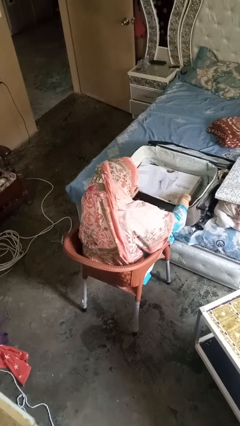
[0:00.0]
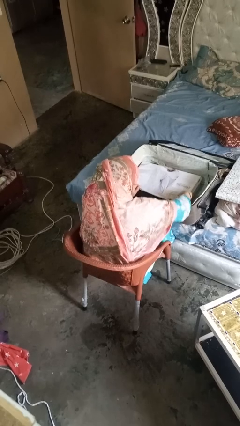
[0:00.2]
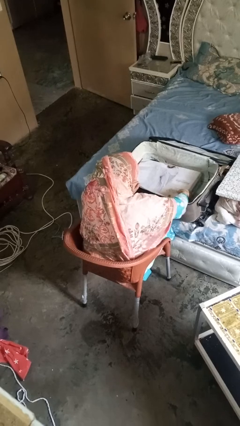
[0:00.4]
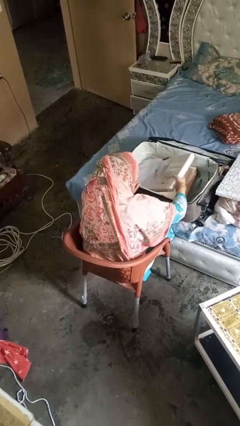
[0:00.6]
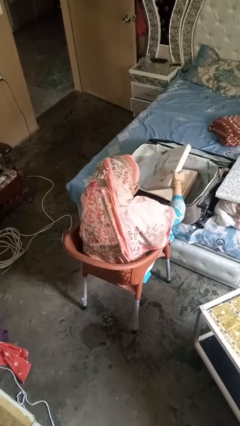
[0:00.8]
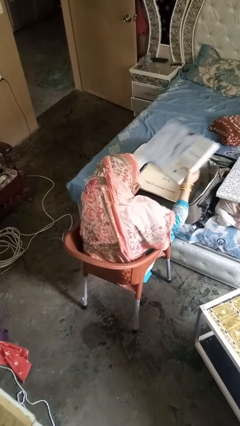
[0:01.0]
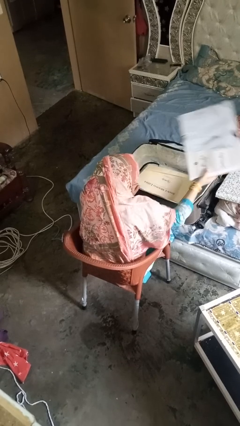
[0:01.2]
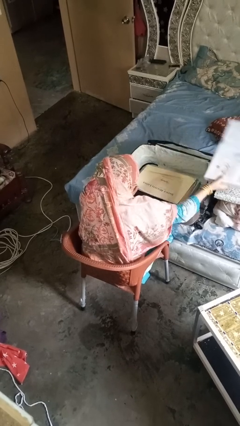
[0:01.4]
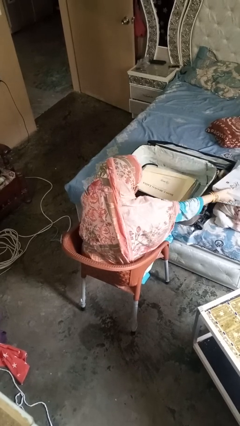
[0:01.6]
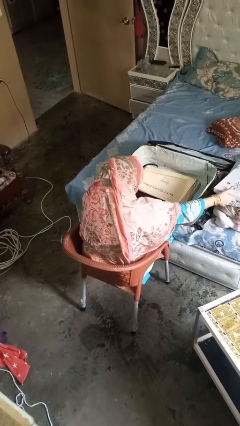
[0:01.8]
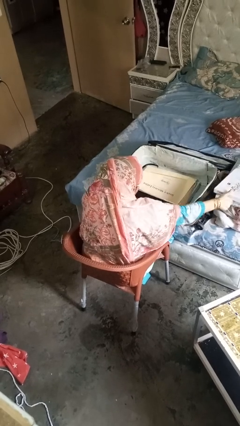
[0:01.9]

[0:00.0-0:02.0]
person unloads clothes from suitcase

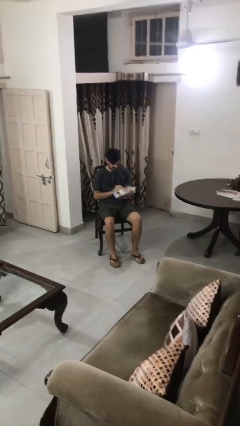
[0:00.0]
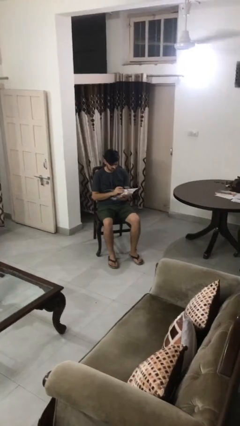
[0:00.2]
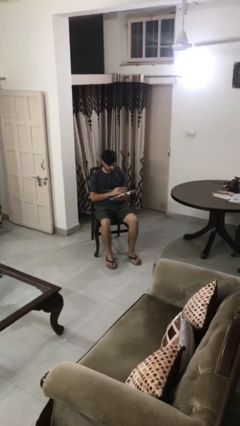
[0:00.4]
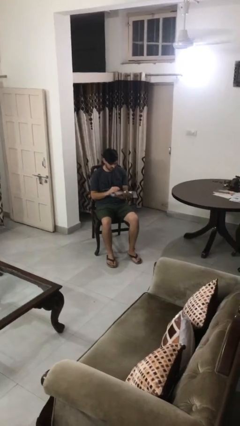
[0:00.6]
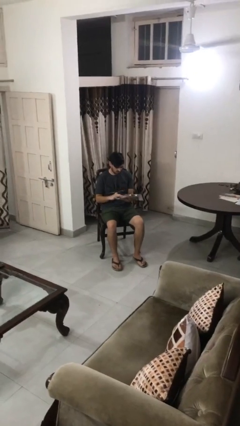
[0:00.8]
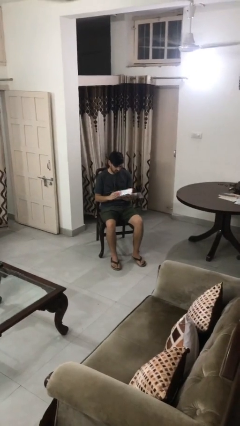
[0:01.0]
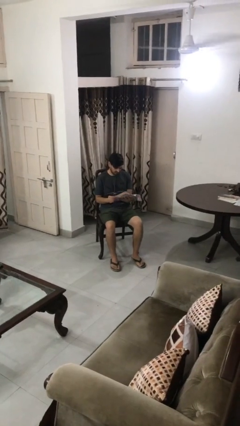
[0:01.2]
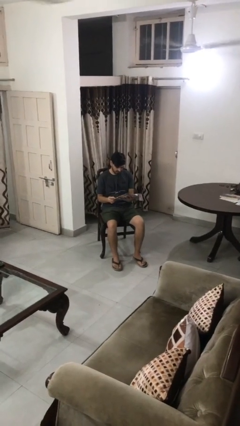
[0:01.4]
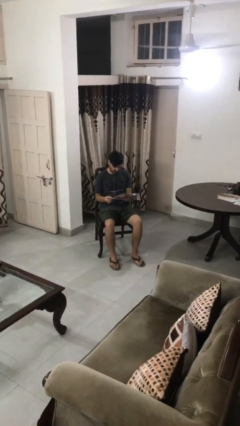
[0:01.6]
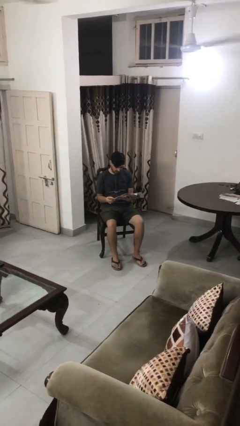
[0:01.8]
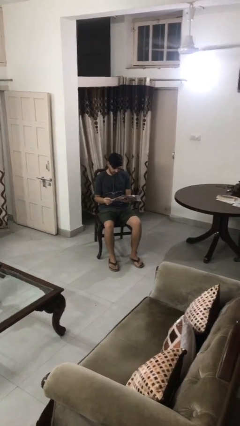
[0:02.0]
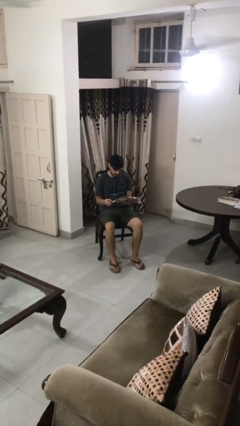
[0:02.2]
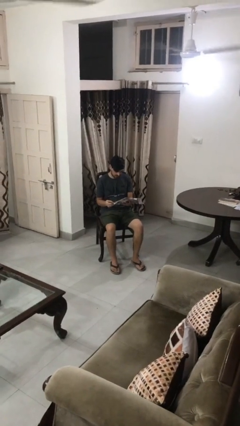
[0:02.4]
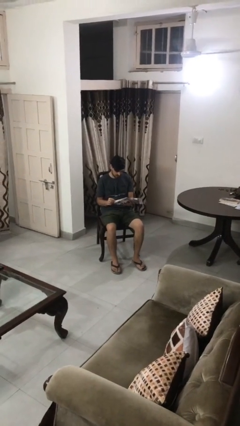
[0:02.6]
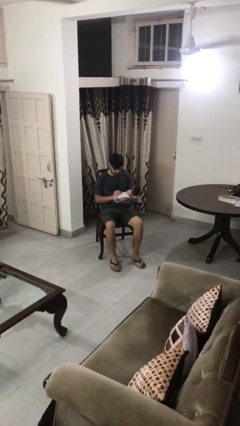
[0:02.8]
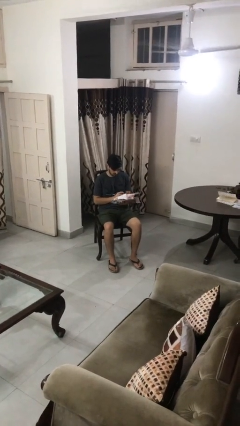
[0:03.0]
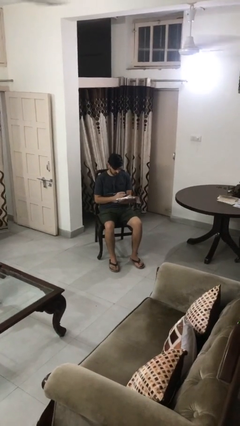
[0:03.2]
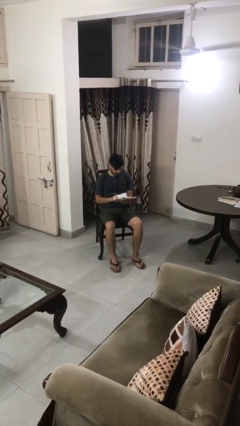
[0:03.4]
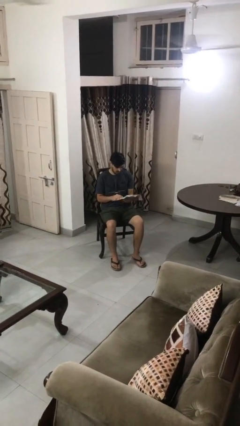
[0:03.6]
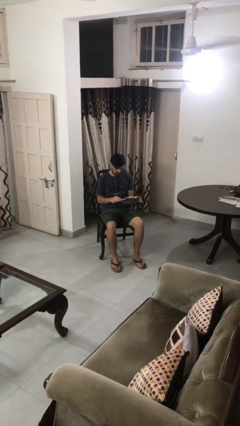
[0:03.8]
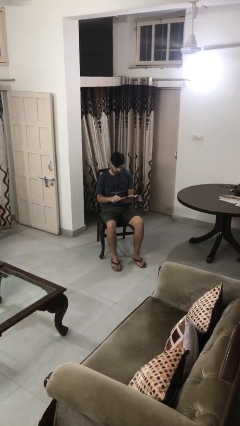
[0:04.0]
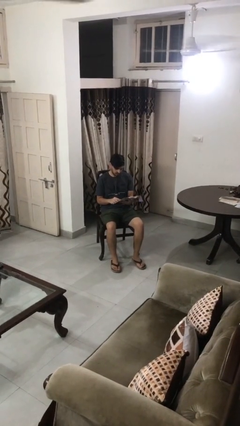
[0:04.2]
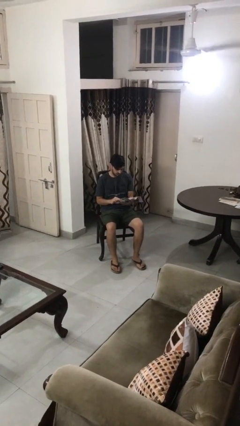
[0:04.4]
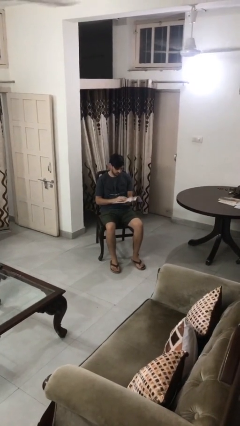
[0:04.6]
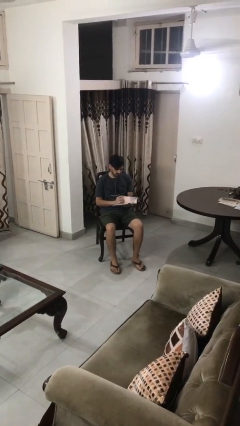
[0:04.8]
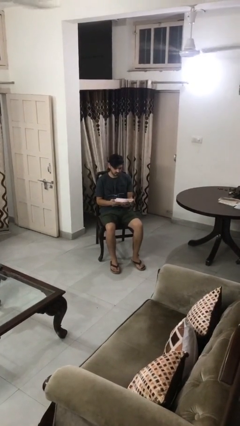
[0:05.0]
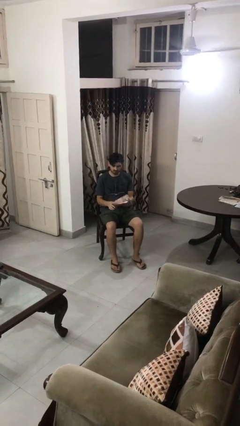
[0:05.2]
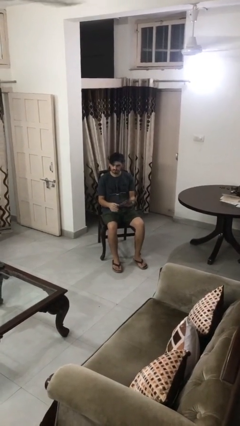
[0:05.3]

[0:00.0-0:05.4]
person reads magazine

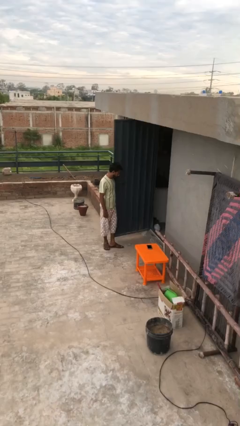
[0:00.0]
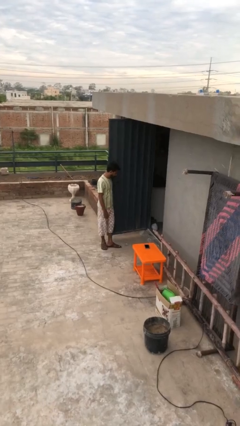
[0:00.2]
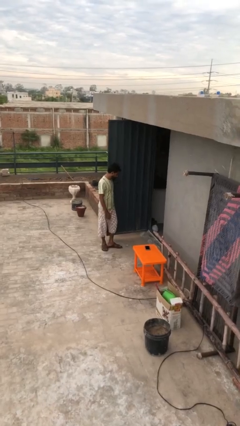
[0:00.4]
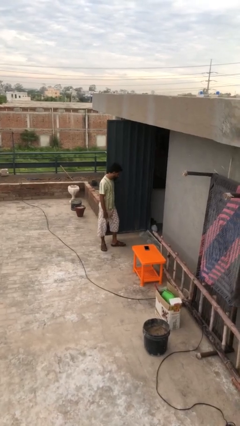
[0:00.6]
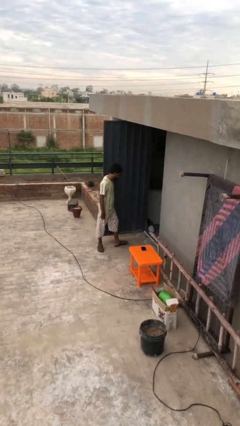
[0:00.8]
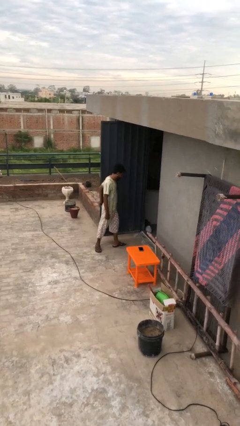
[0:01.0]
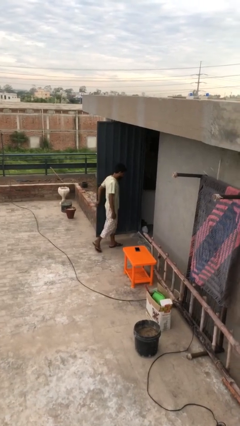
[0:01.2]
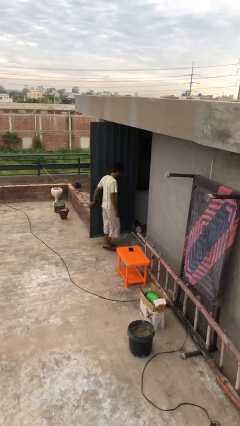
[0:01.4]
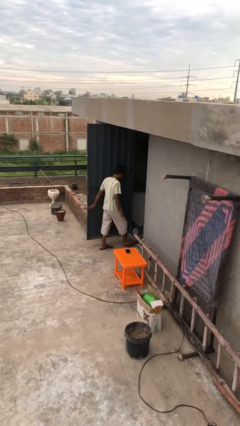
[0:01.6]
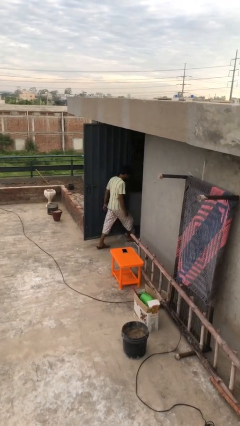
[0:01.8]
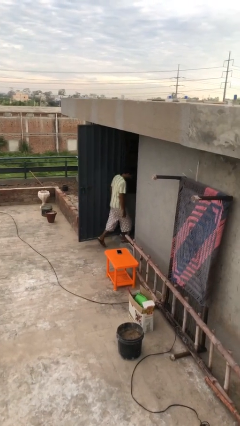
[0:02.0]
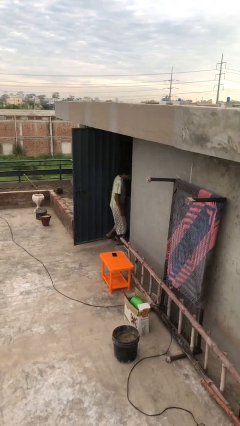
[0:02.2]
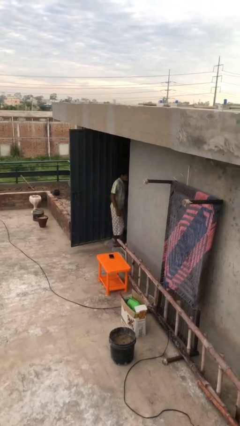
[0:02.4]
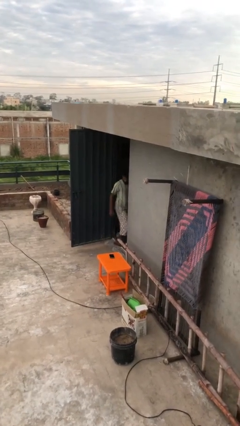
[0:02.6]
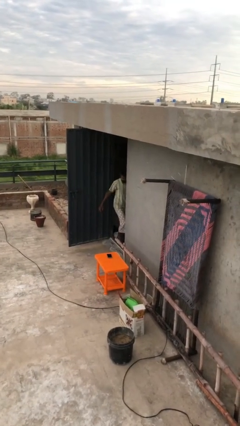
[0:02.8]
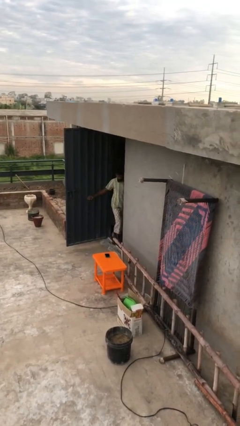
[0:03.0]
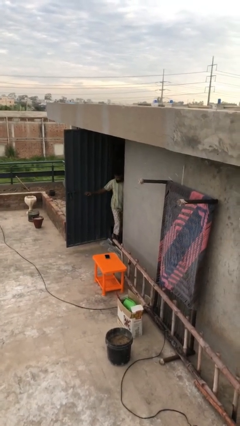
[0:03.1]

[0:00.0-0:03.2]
person exits scene through structure

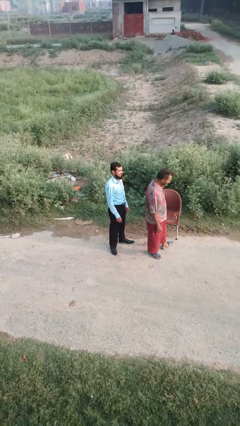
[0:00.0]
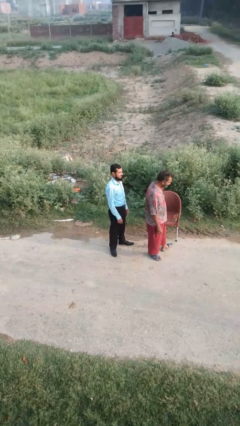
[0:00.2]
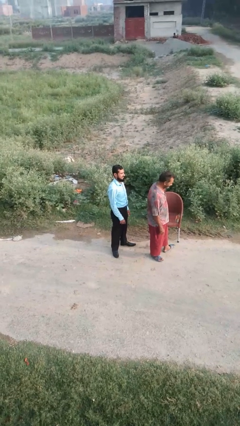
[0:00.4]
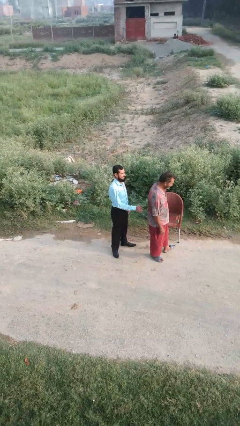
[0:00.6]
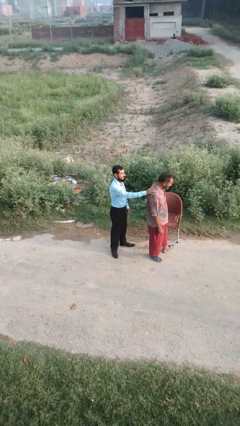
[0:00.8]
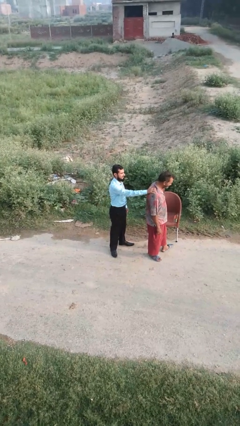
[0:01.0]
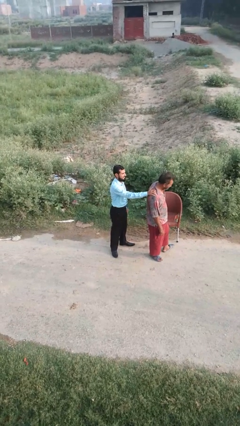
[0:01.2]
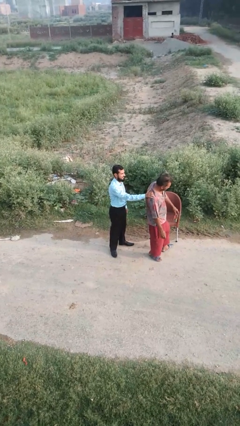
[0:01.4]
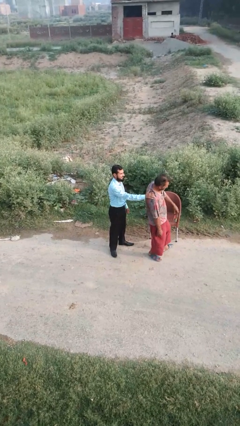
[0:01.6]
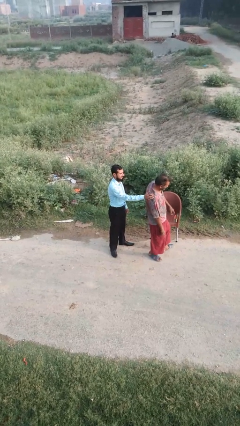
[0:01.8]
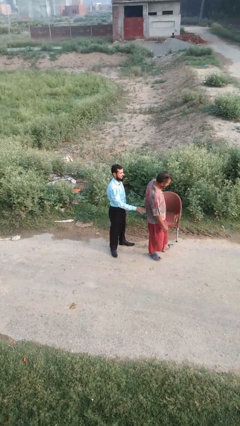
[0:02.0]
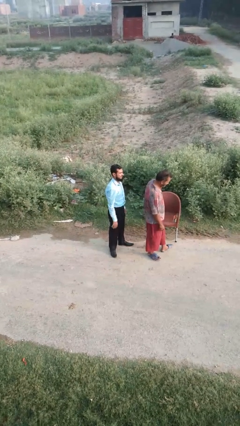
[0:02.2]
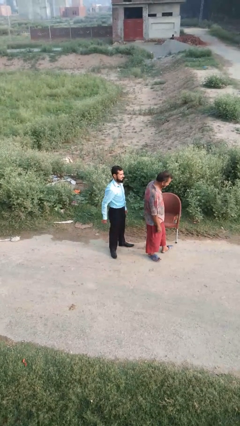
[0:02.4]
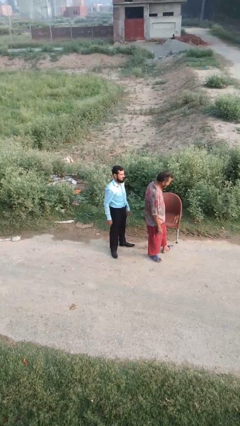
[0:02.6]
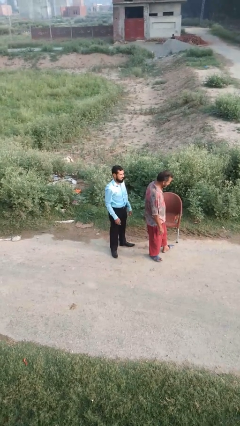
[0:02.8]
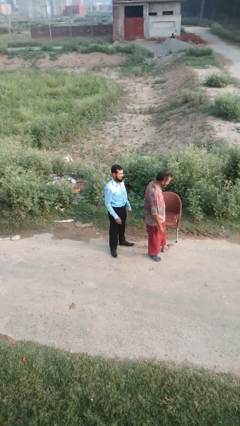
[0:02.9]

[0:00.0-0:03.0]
person touches back of person

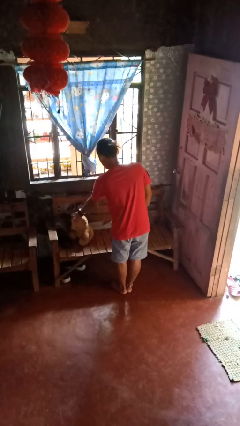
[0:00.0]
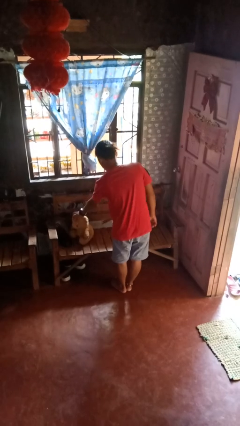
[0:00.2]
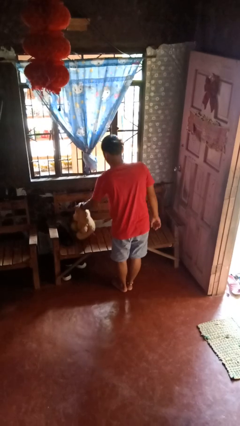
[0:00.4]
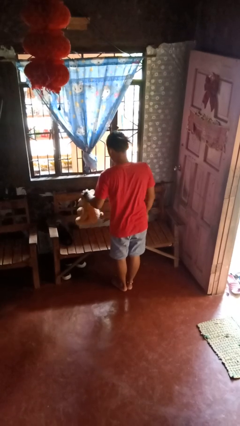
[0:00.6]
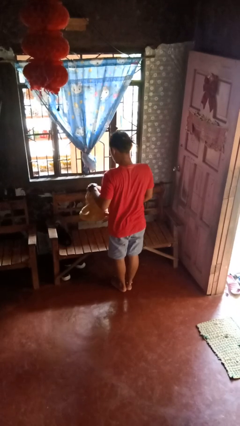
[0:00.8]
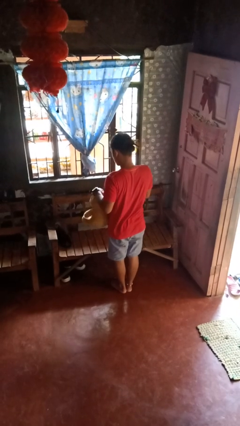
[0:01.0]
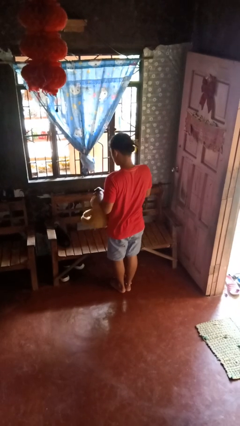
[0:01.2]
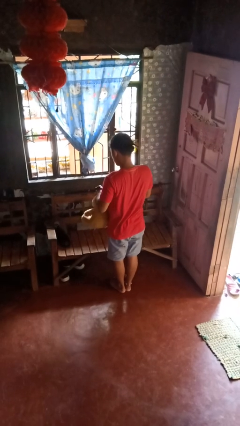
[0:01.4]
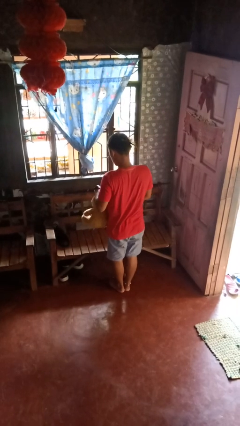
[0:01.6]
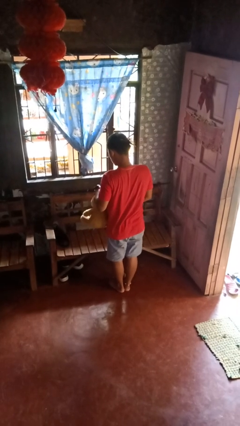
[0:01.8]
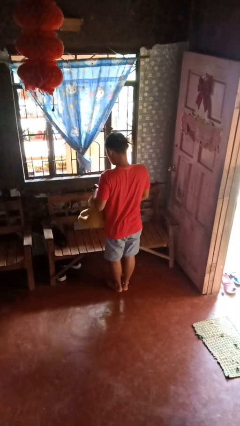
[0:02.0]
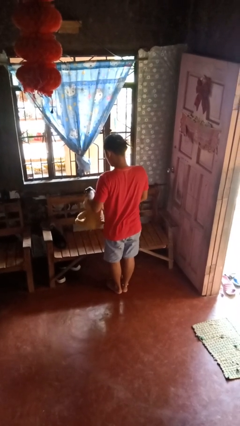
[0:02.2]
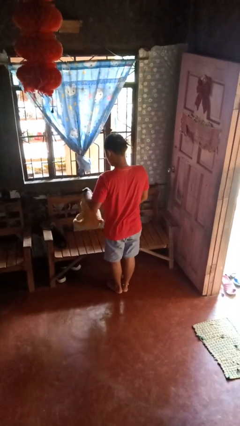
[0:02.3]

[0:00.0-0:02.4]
person picks up object from couch

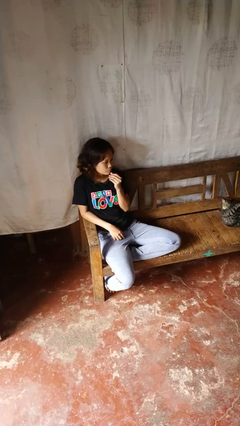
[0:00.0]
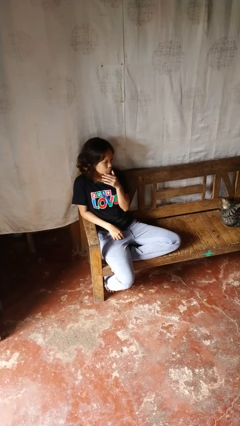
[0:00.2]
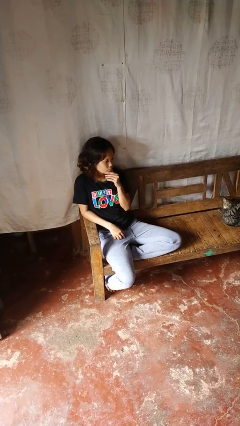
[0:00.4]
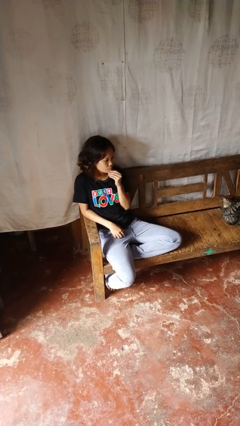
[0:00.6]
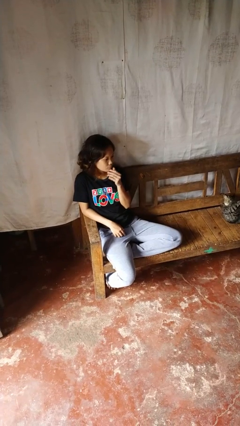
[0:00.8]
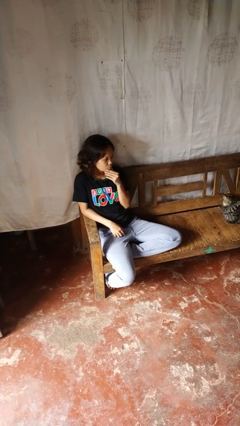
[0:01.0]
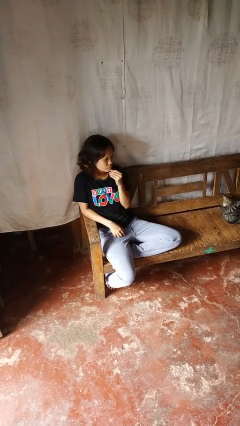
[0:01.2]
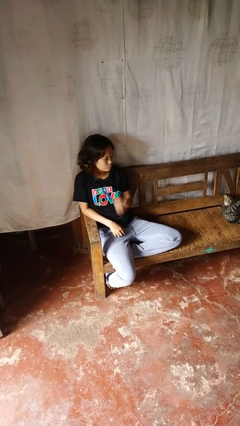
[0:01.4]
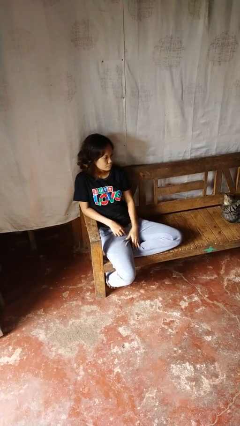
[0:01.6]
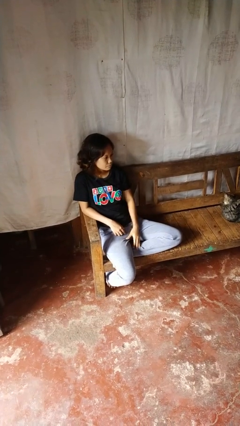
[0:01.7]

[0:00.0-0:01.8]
person strokes chin
